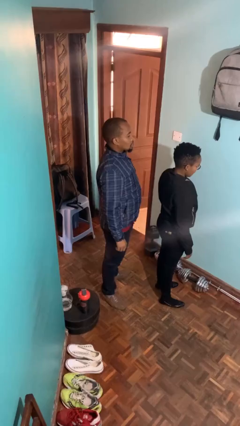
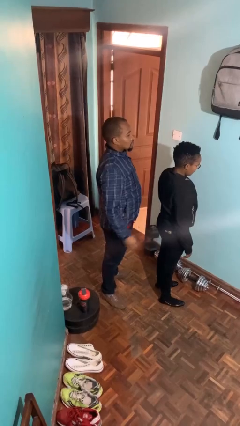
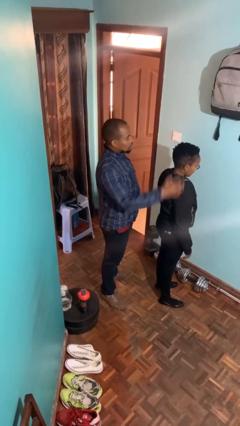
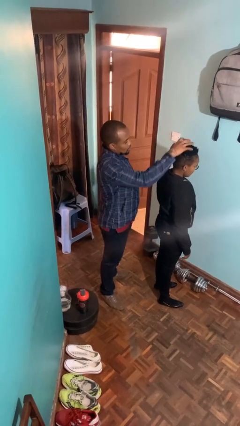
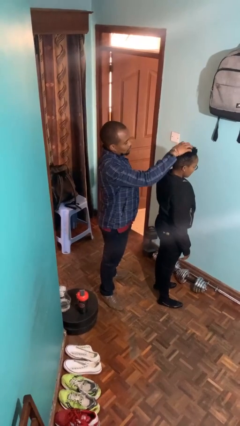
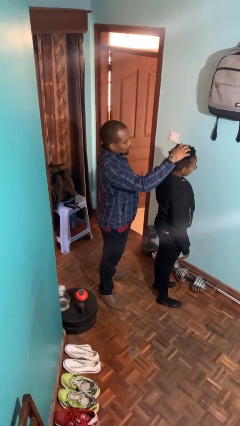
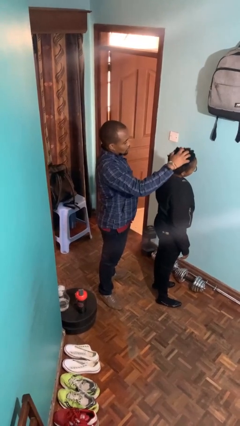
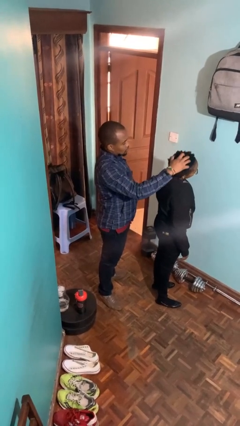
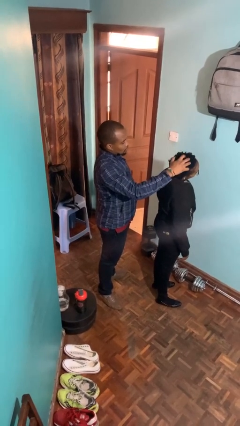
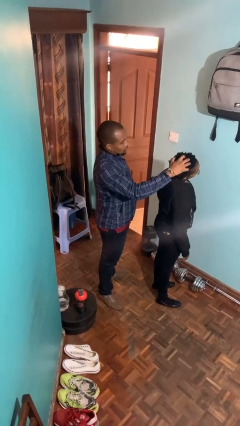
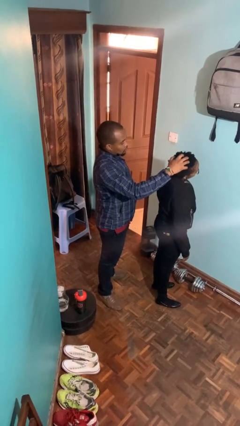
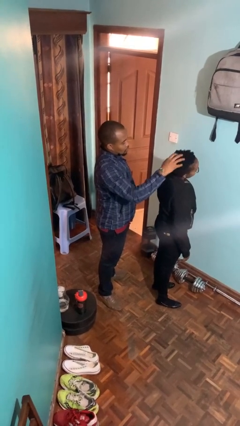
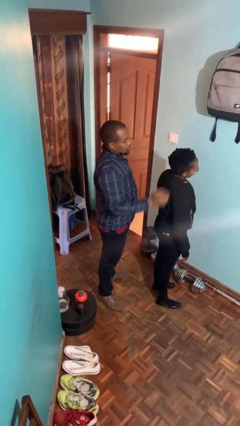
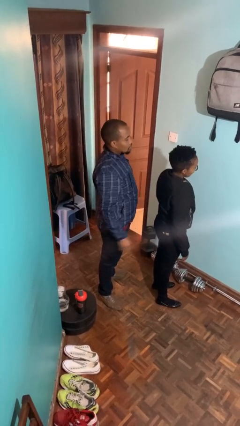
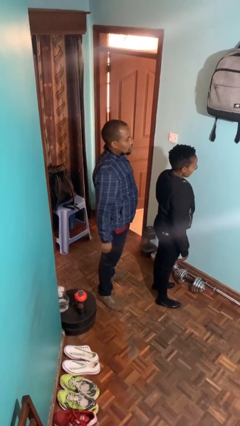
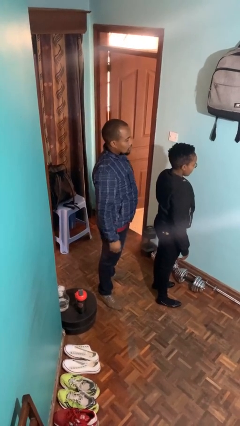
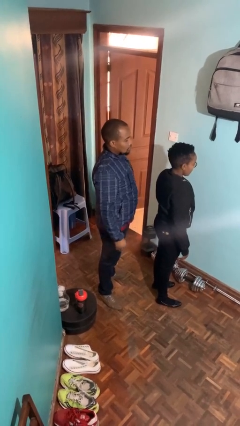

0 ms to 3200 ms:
person grabs person by hair

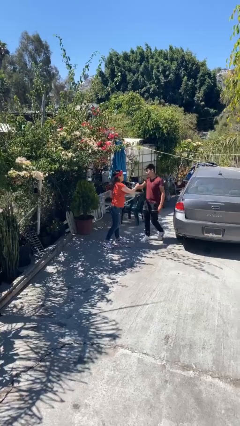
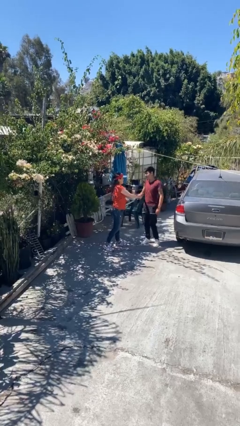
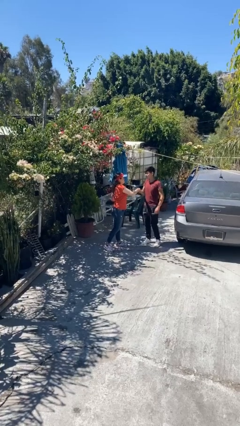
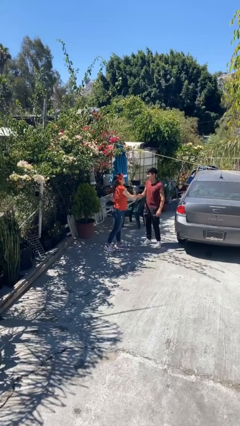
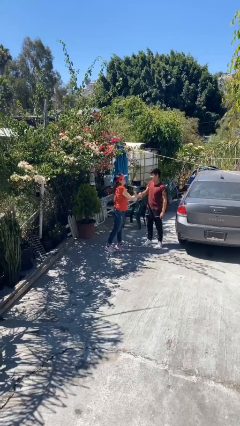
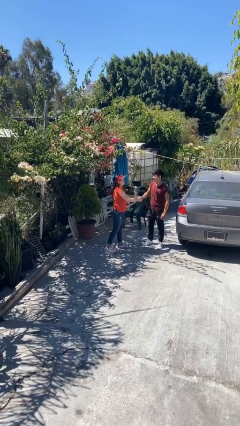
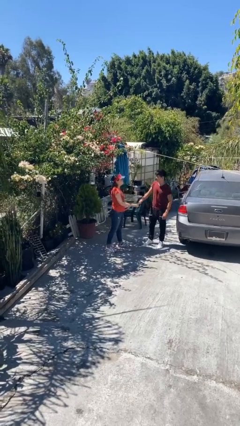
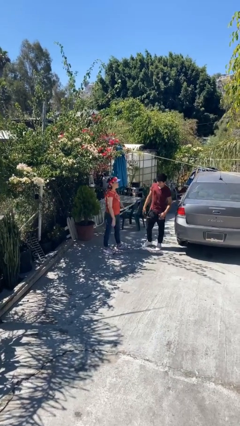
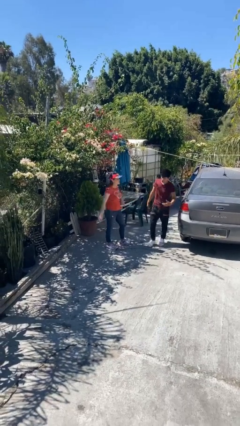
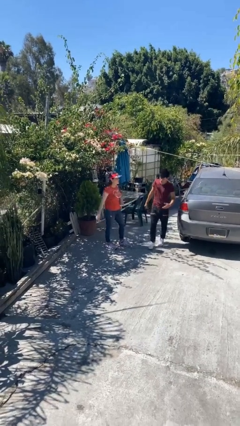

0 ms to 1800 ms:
person shakes hand

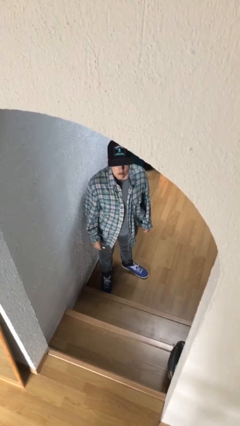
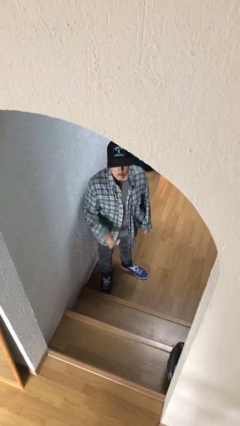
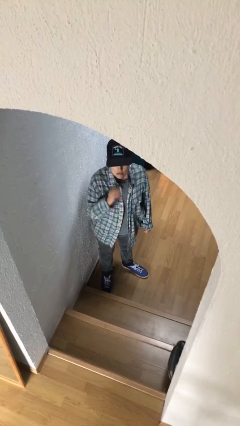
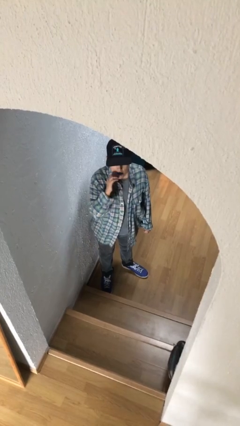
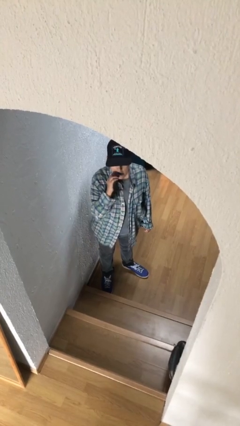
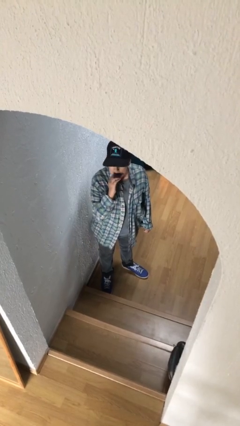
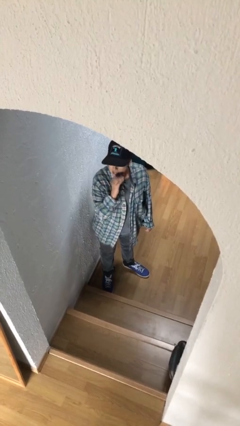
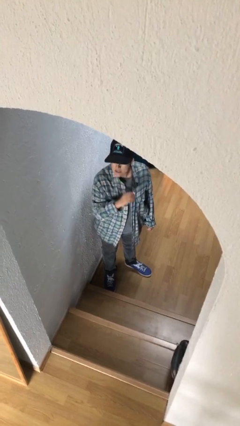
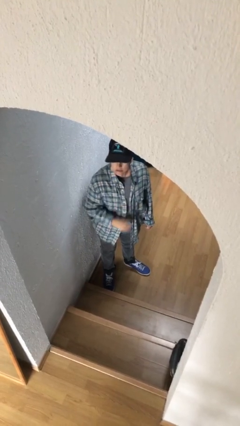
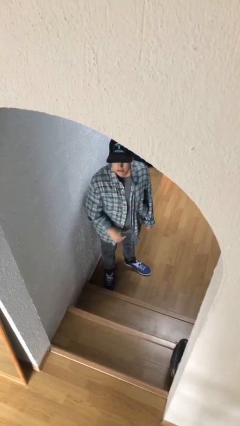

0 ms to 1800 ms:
person applies lip makeup

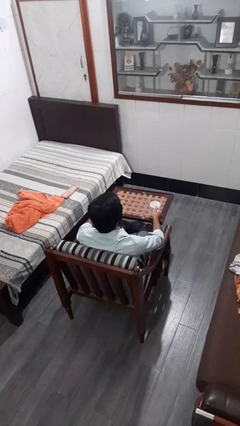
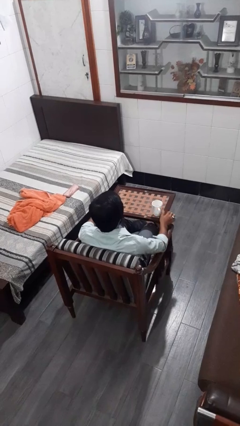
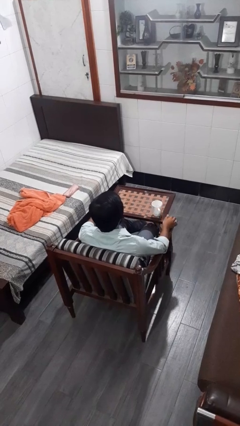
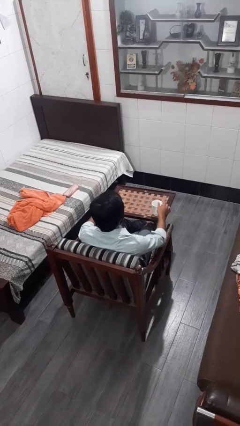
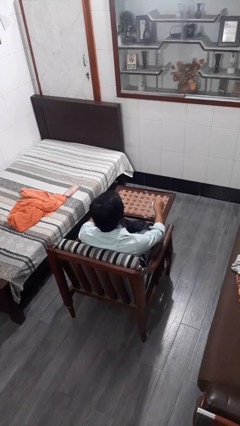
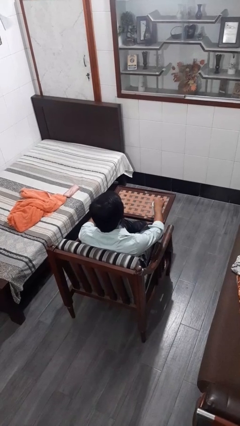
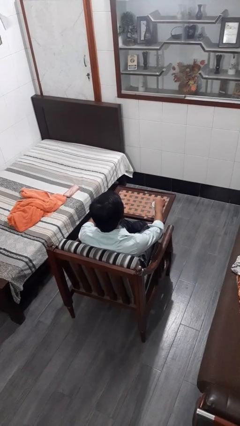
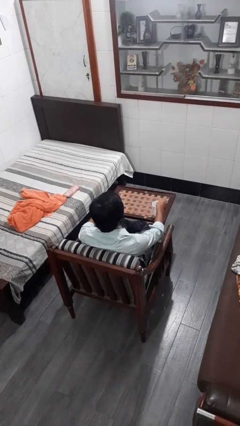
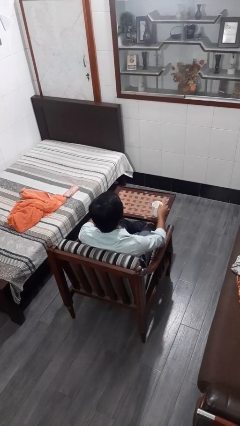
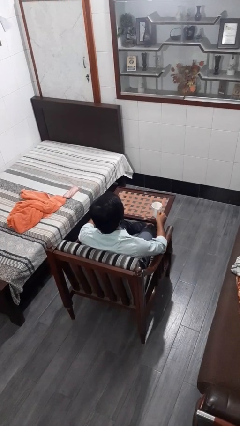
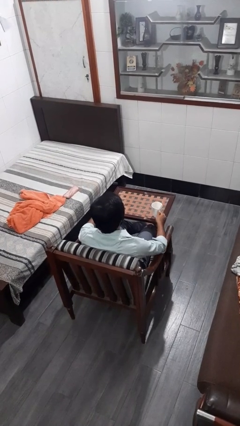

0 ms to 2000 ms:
person stirs mug

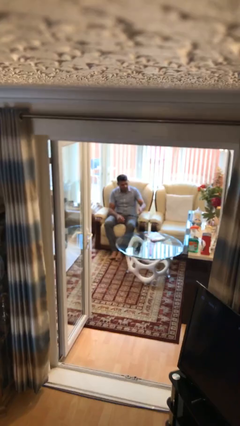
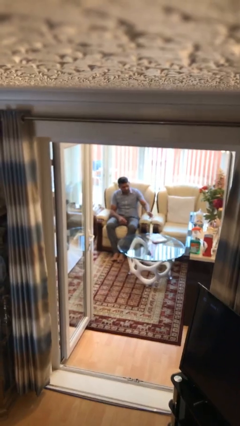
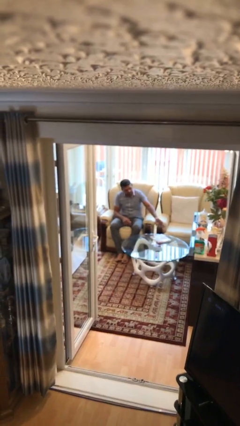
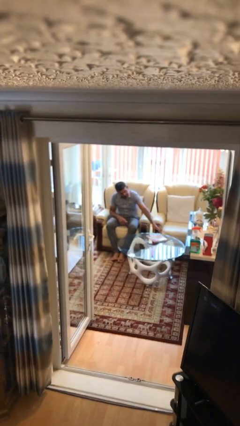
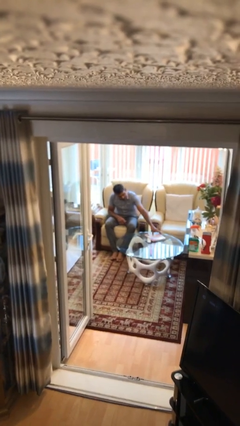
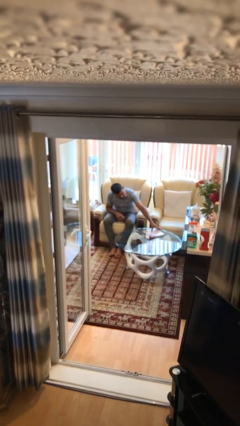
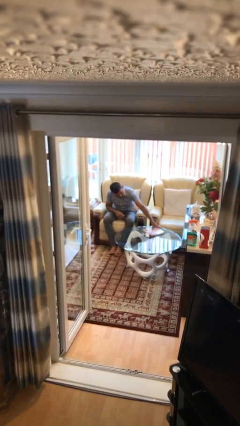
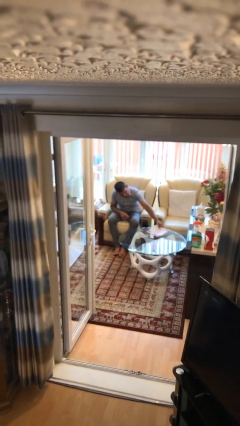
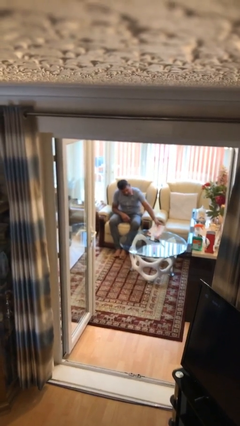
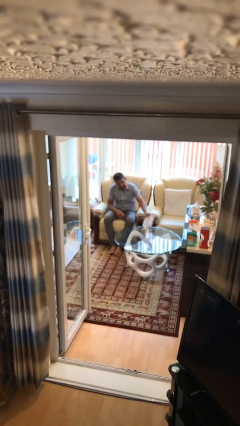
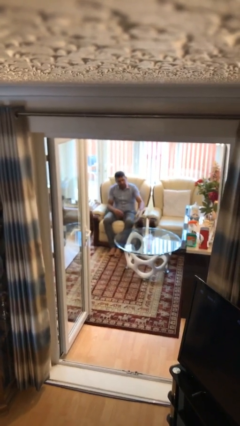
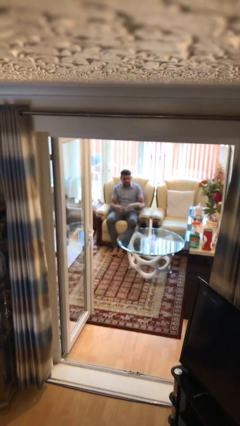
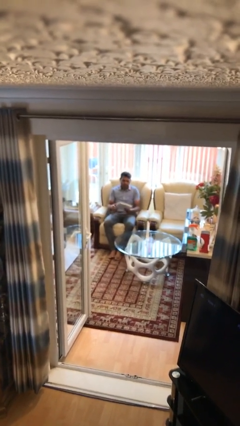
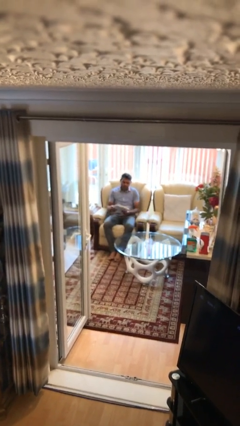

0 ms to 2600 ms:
person picks up object from table

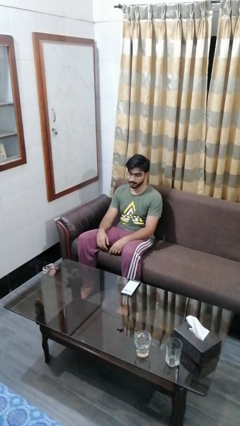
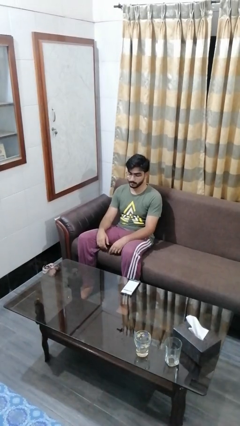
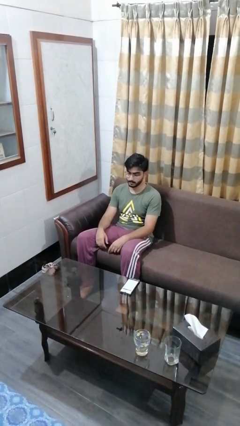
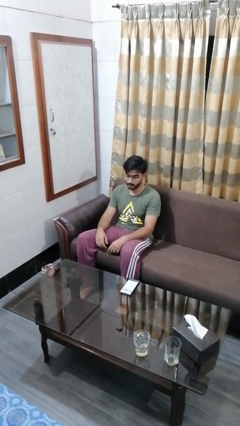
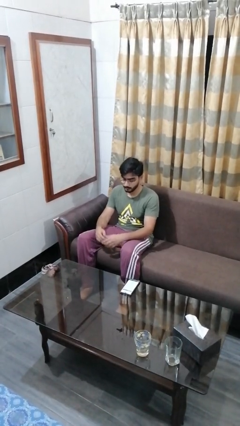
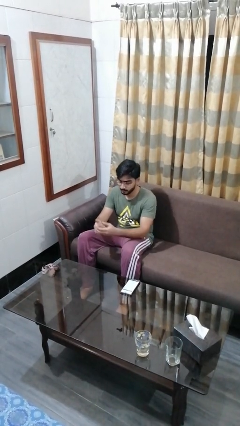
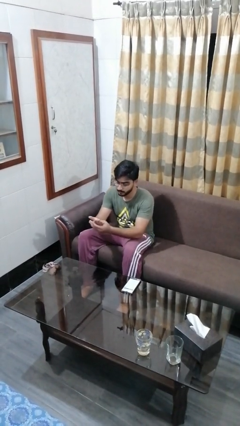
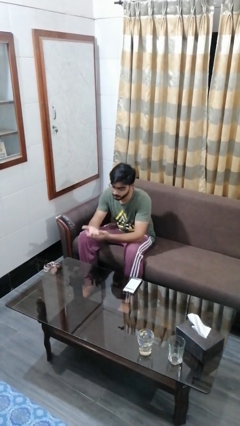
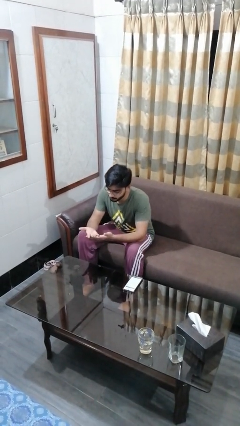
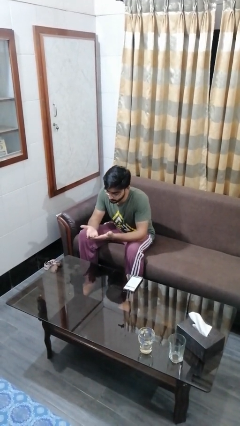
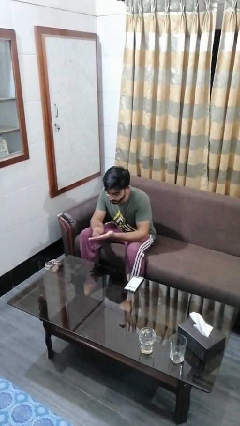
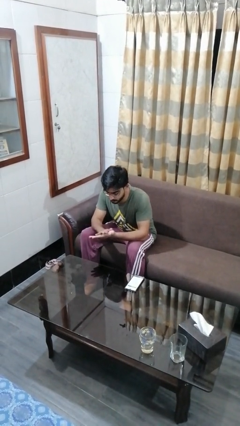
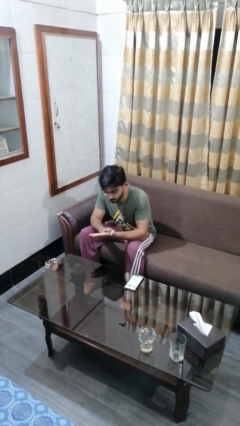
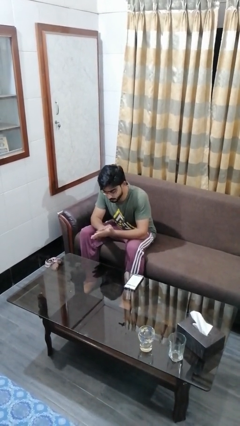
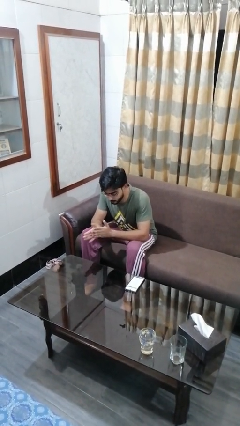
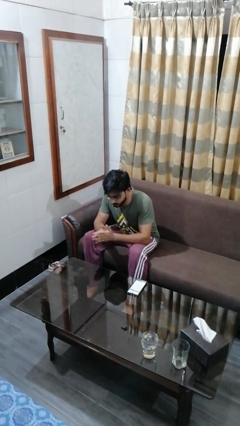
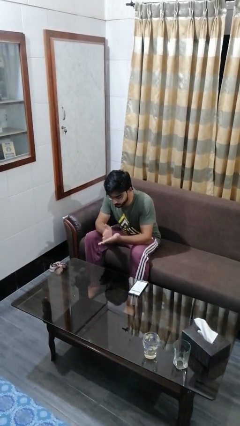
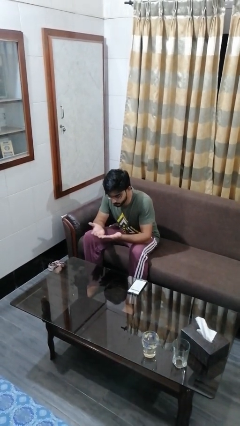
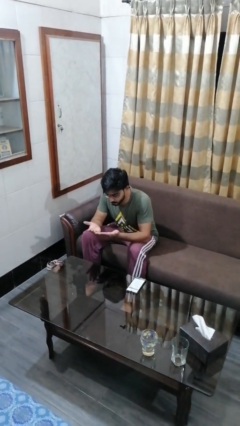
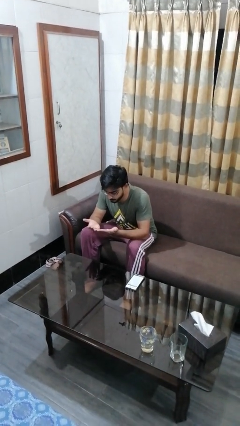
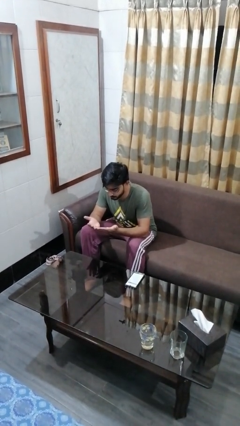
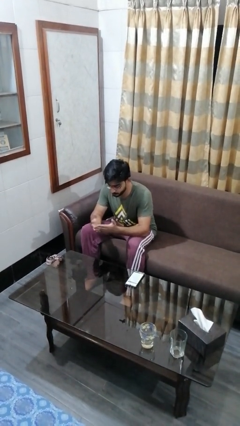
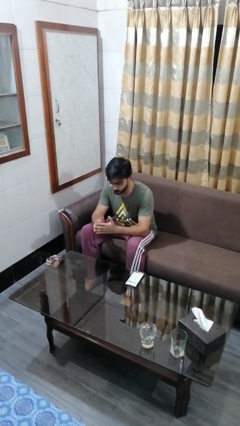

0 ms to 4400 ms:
person looks at hands in lap

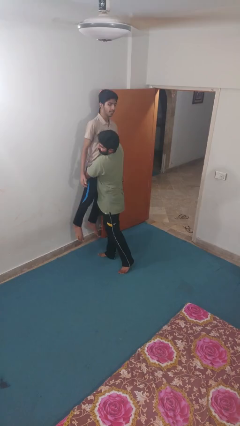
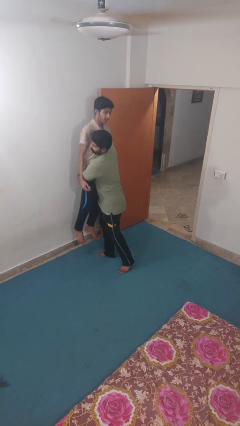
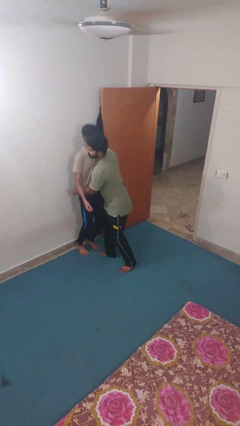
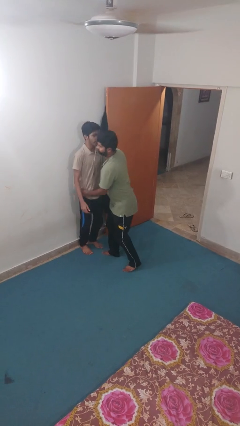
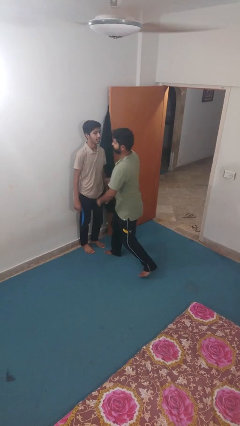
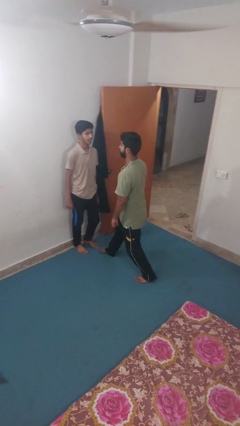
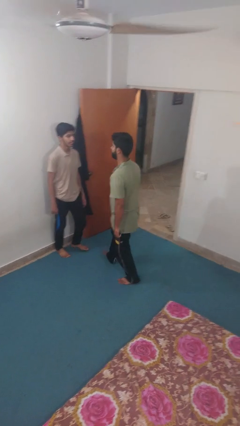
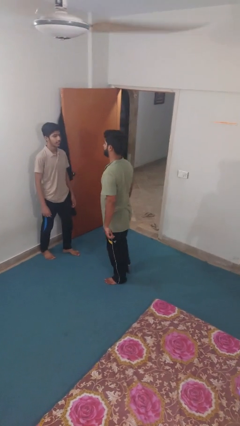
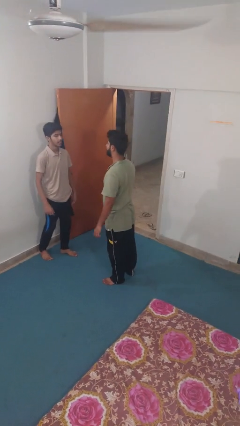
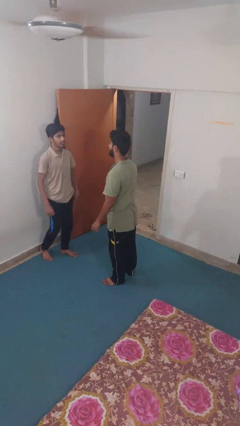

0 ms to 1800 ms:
person puts down person
